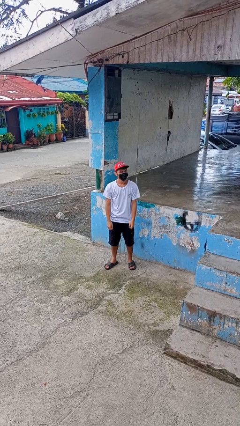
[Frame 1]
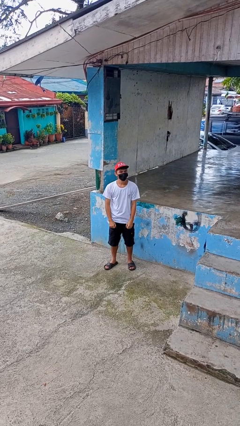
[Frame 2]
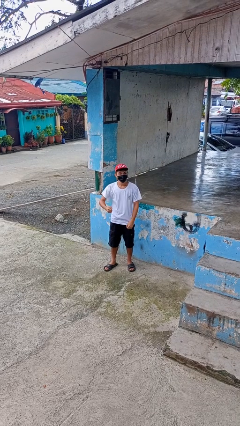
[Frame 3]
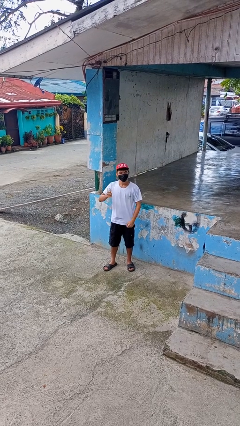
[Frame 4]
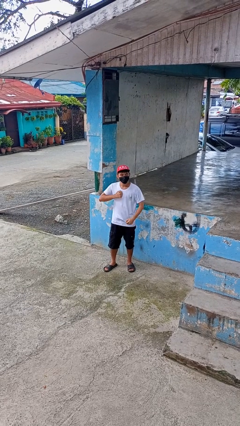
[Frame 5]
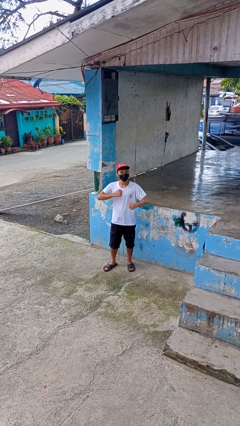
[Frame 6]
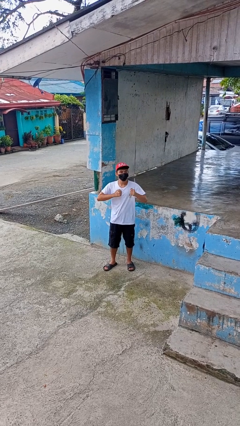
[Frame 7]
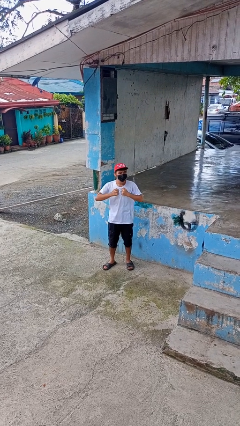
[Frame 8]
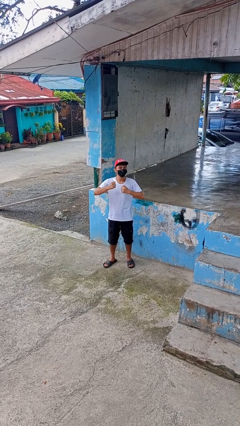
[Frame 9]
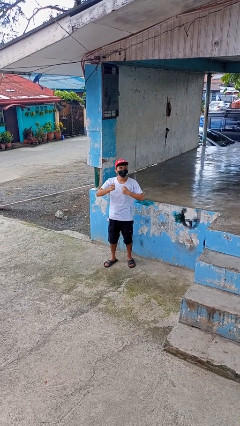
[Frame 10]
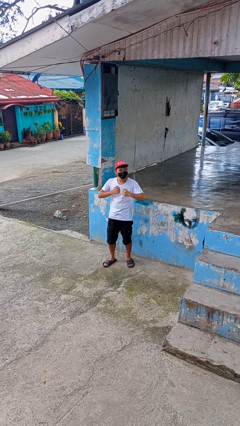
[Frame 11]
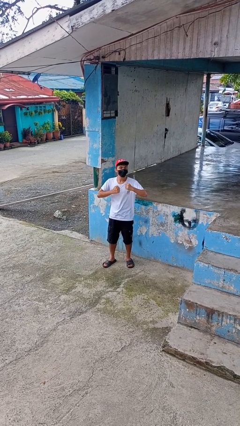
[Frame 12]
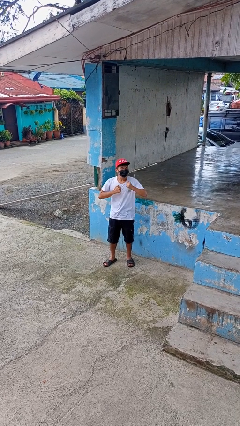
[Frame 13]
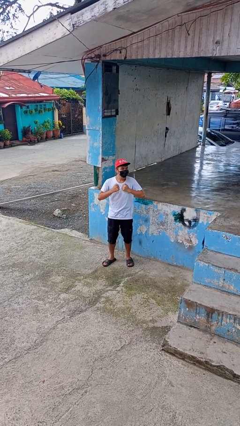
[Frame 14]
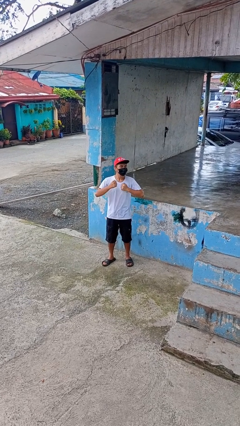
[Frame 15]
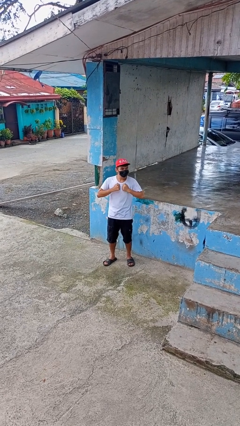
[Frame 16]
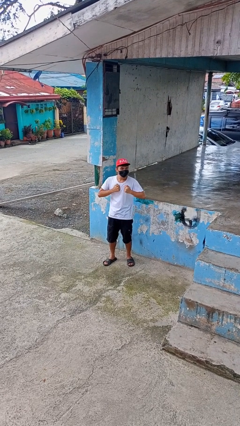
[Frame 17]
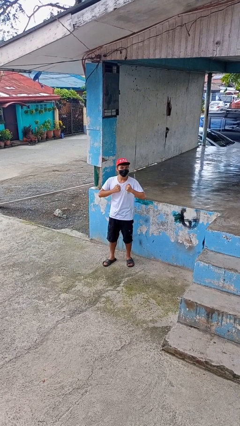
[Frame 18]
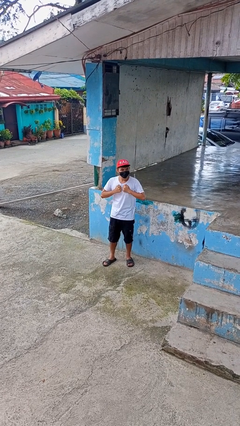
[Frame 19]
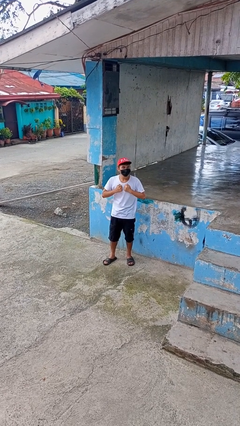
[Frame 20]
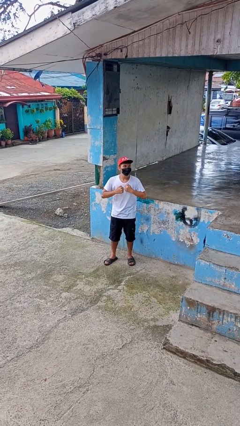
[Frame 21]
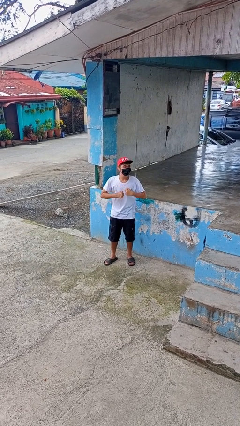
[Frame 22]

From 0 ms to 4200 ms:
person drums on chest

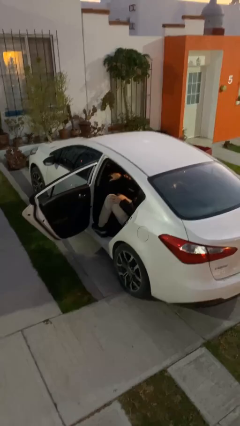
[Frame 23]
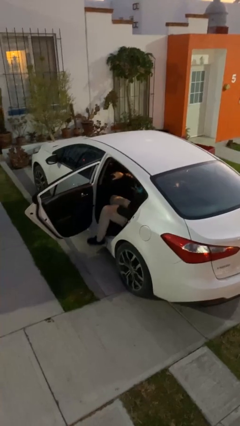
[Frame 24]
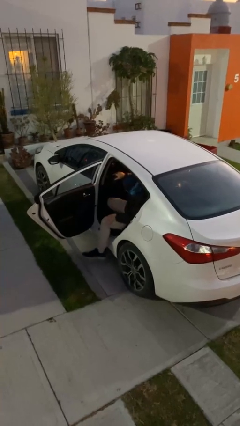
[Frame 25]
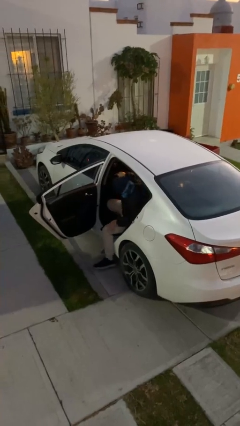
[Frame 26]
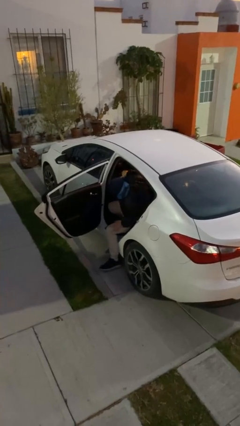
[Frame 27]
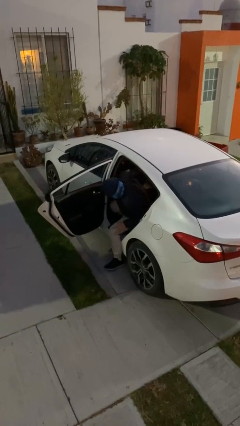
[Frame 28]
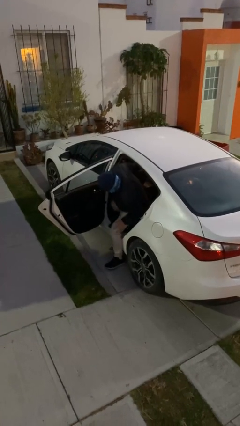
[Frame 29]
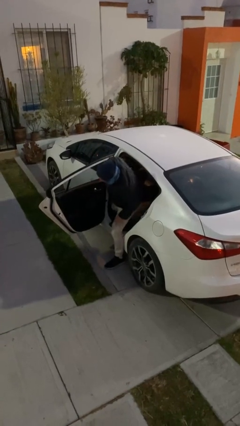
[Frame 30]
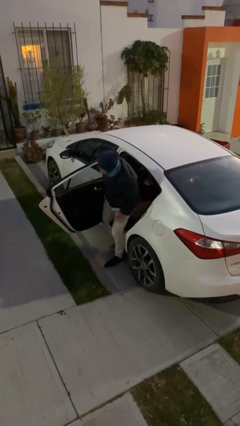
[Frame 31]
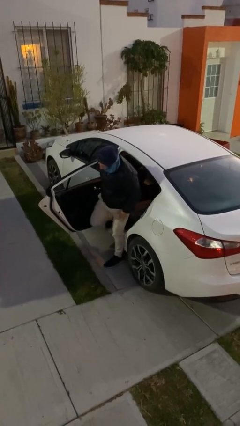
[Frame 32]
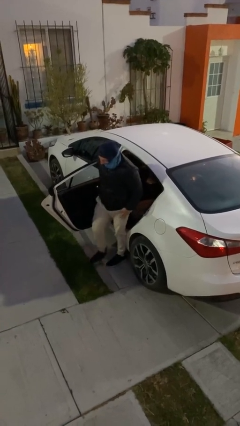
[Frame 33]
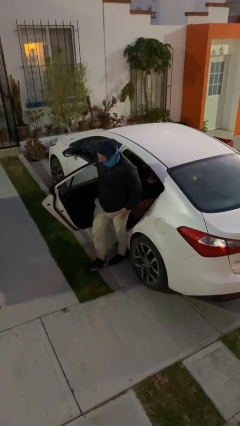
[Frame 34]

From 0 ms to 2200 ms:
person exits car

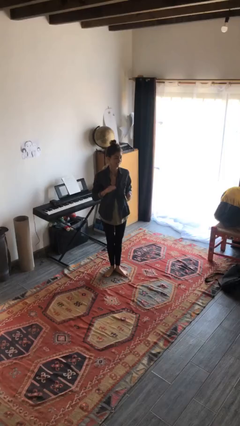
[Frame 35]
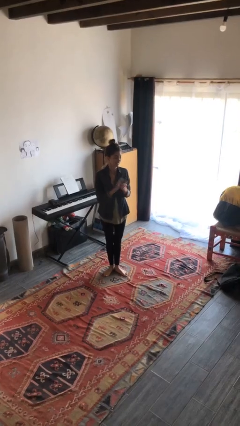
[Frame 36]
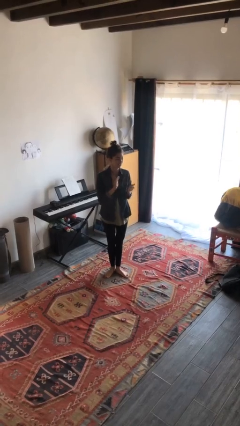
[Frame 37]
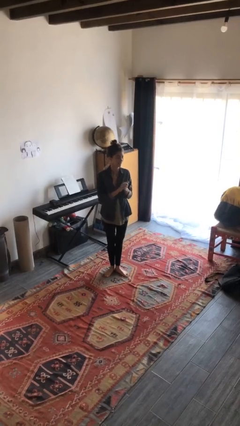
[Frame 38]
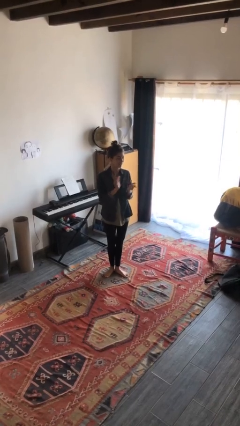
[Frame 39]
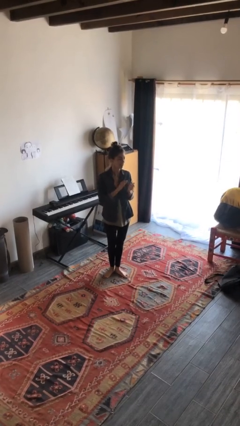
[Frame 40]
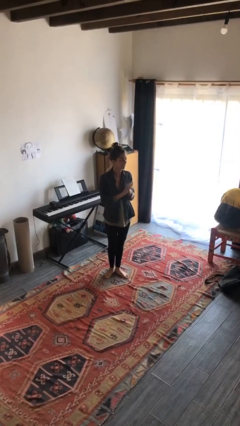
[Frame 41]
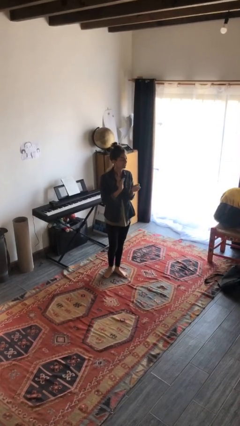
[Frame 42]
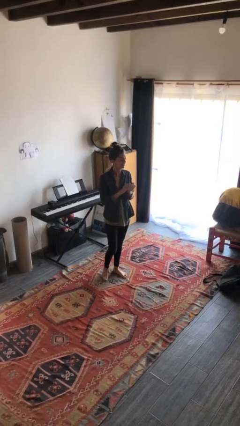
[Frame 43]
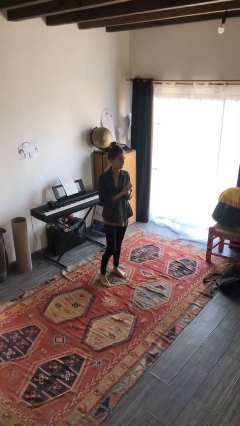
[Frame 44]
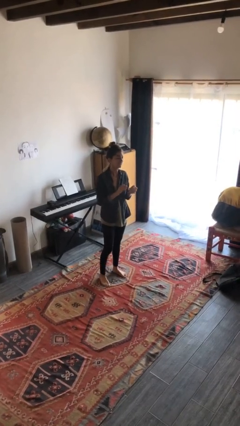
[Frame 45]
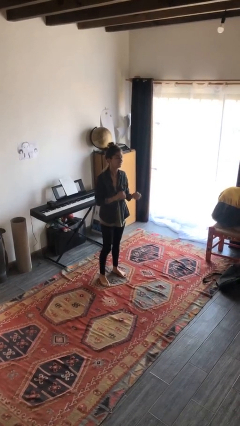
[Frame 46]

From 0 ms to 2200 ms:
person claps hands

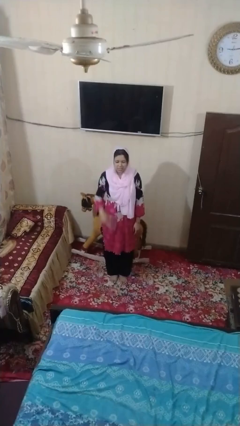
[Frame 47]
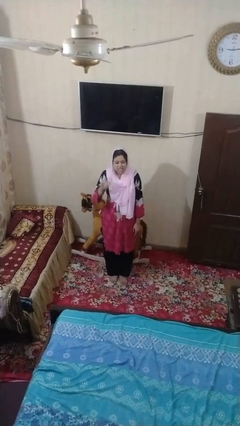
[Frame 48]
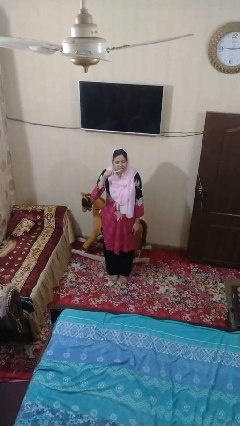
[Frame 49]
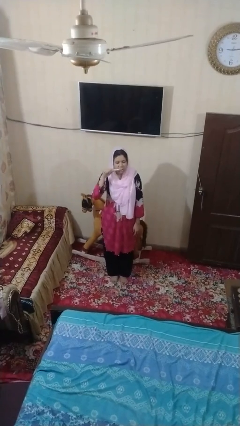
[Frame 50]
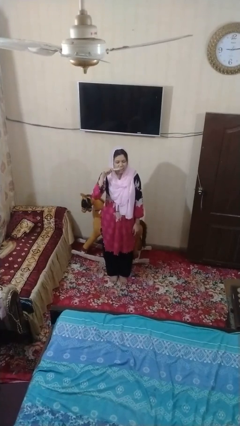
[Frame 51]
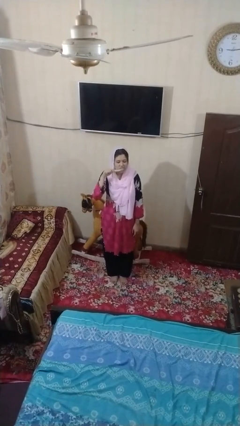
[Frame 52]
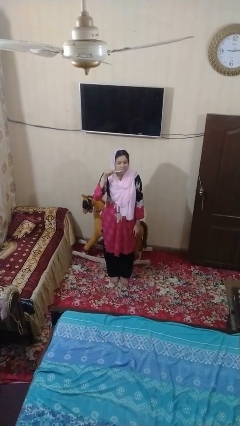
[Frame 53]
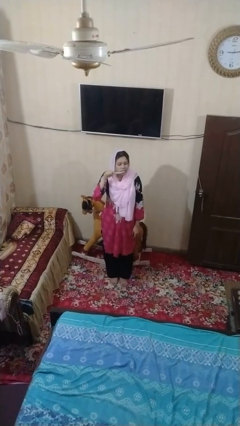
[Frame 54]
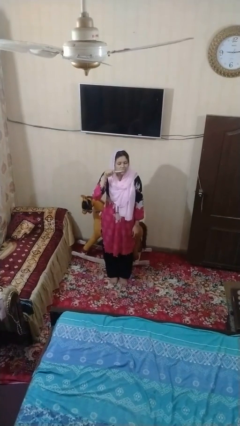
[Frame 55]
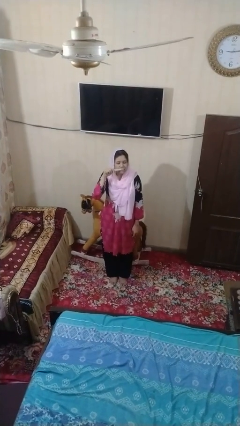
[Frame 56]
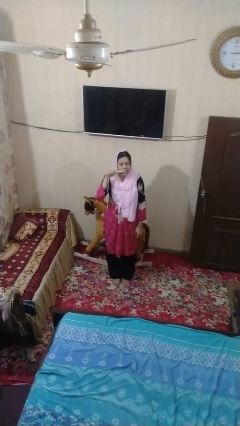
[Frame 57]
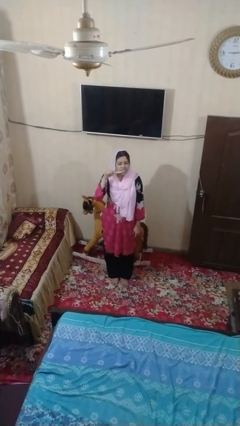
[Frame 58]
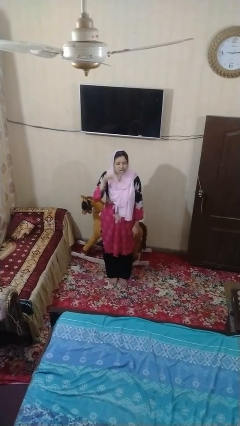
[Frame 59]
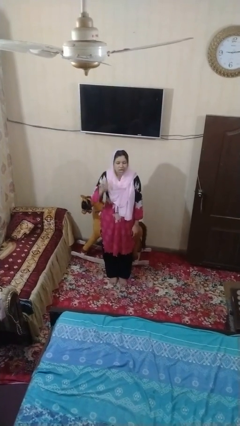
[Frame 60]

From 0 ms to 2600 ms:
person brushes teeth

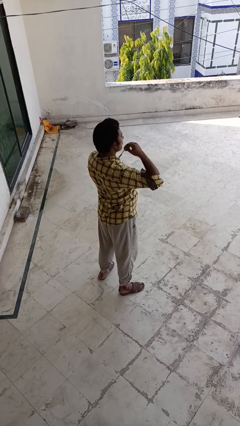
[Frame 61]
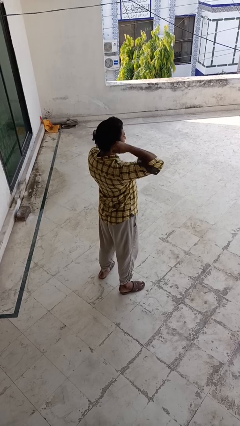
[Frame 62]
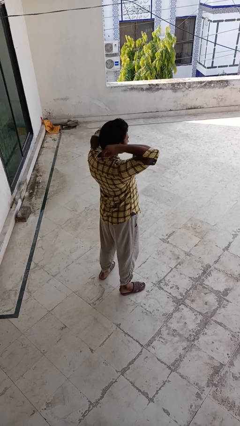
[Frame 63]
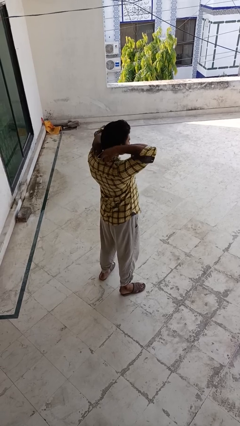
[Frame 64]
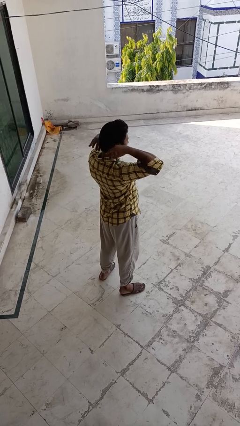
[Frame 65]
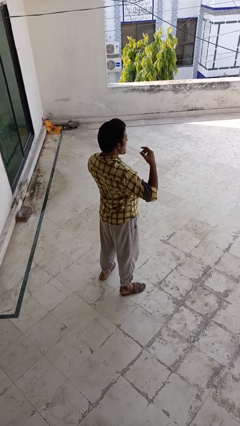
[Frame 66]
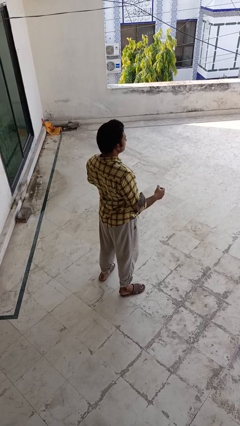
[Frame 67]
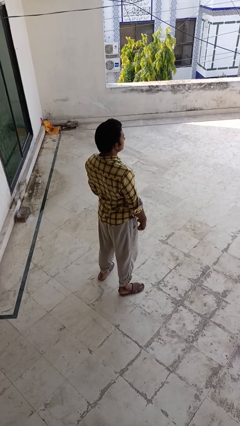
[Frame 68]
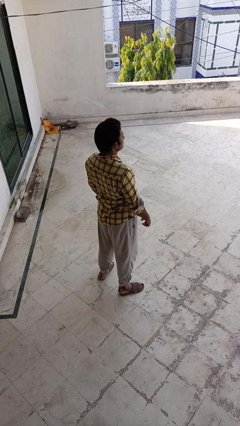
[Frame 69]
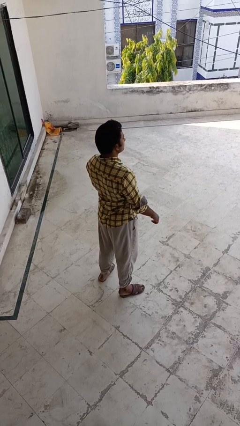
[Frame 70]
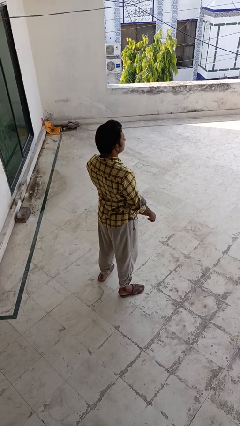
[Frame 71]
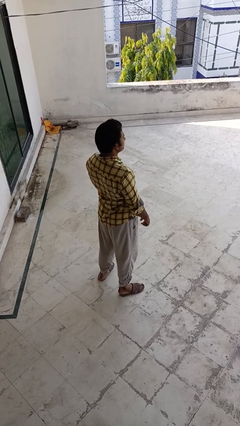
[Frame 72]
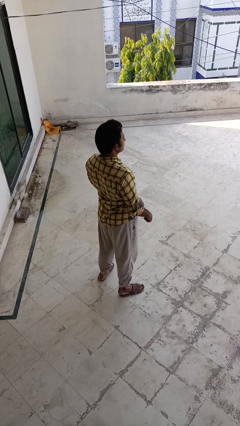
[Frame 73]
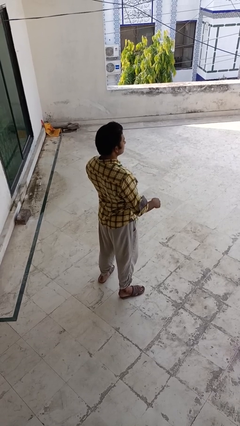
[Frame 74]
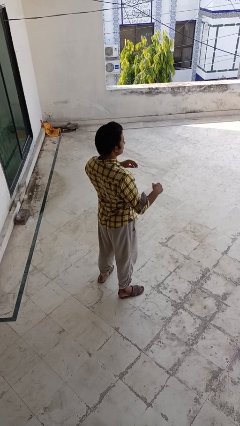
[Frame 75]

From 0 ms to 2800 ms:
person puts on necklace

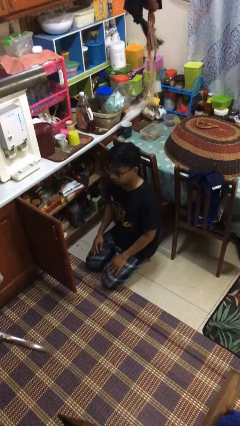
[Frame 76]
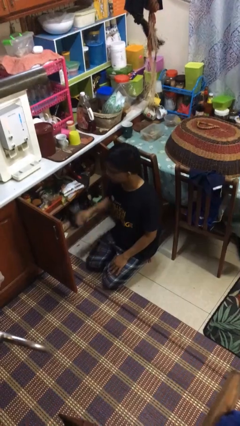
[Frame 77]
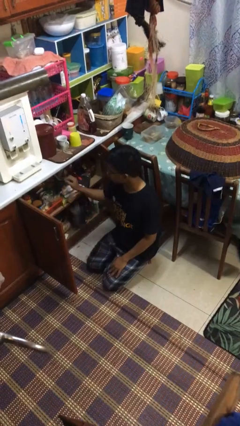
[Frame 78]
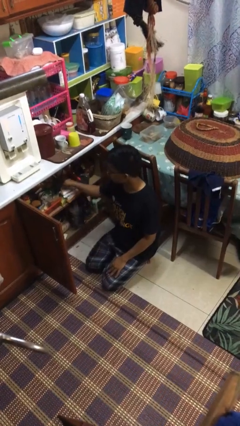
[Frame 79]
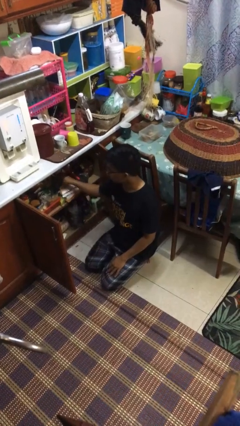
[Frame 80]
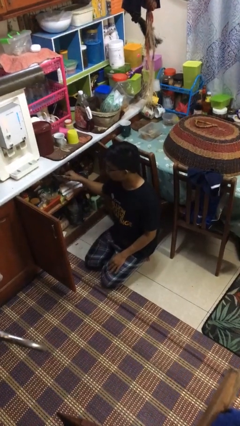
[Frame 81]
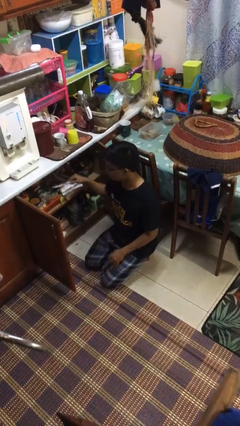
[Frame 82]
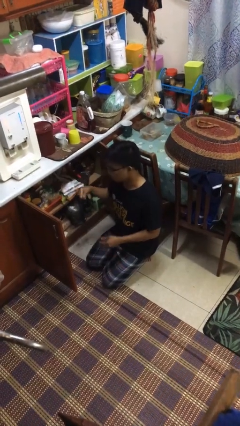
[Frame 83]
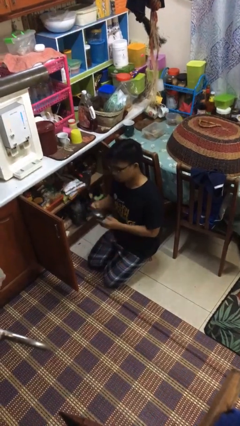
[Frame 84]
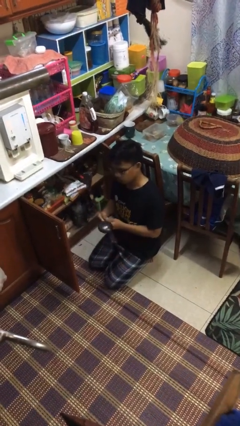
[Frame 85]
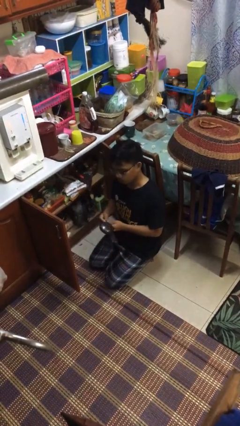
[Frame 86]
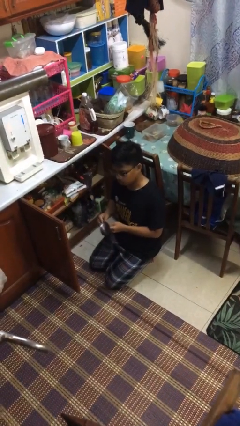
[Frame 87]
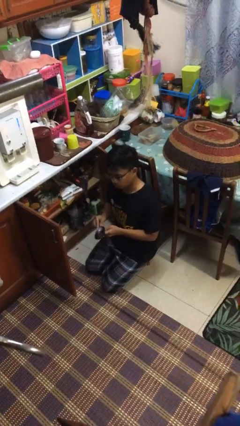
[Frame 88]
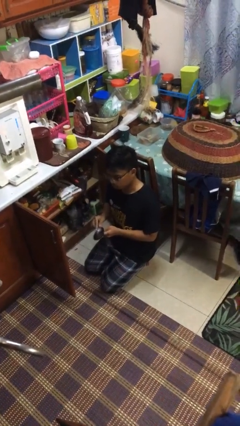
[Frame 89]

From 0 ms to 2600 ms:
person takes object from kitchen drawer

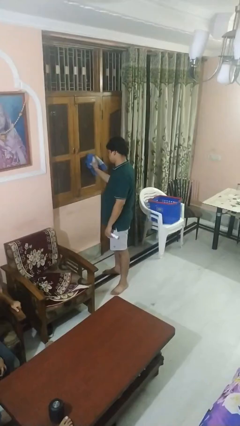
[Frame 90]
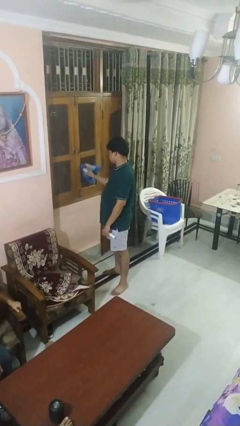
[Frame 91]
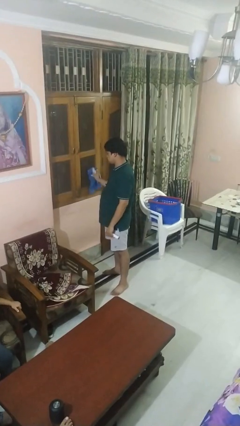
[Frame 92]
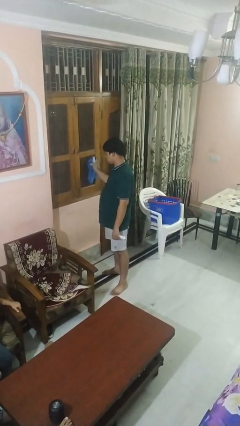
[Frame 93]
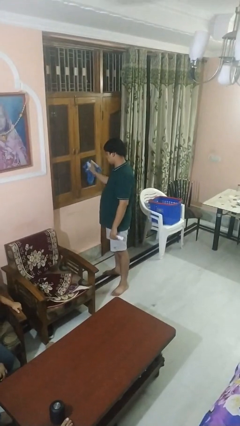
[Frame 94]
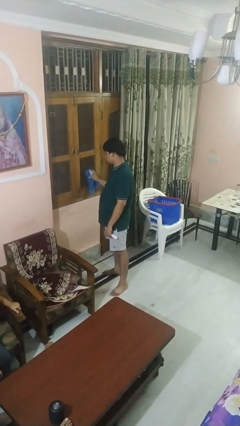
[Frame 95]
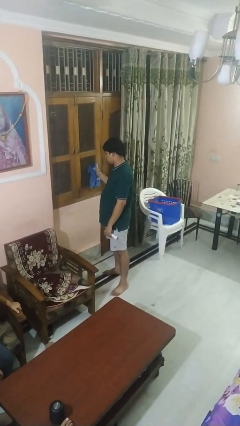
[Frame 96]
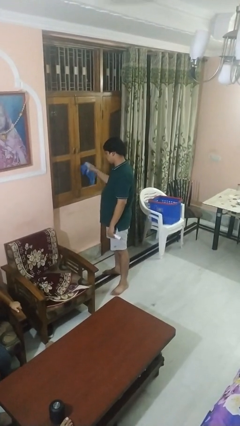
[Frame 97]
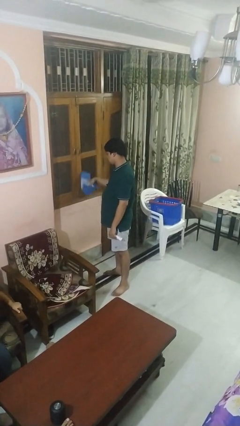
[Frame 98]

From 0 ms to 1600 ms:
person washes window
